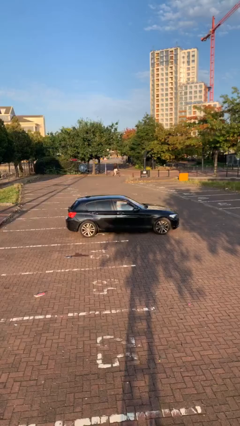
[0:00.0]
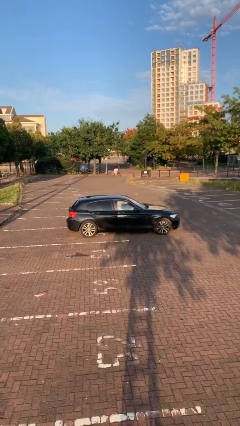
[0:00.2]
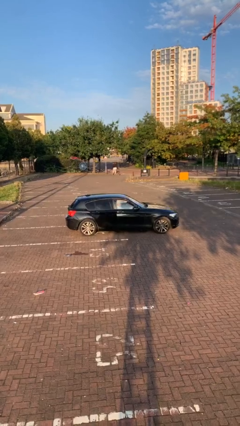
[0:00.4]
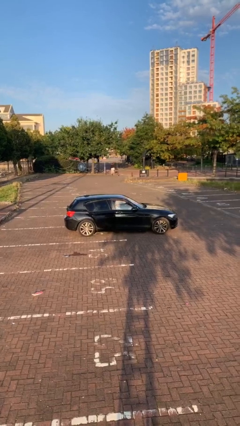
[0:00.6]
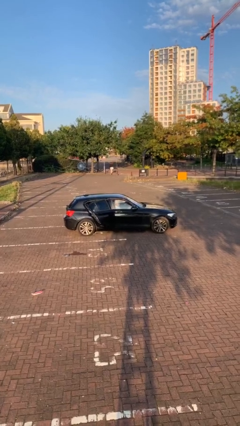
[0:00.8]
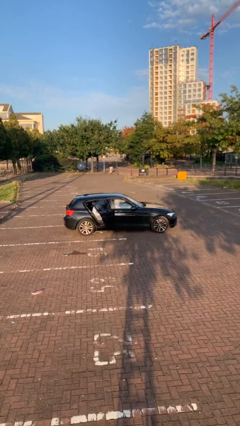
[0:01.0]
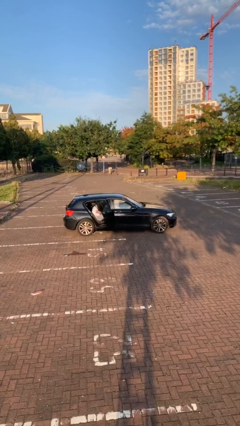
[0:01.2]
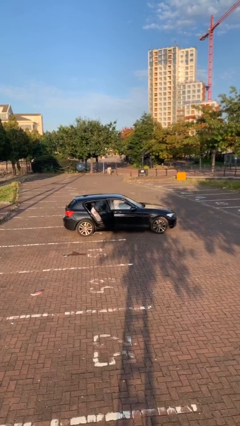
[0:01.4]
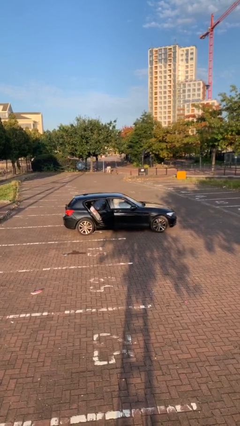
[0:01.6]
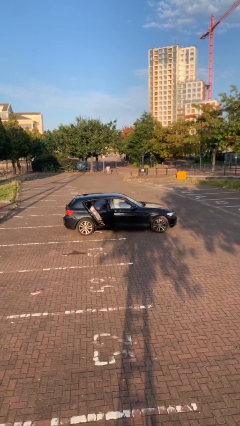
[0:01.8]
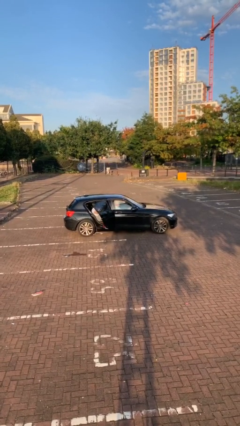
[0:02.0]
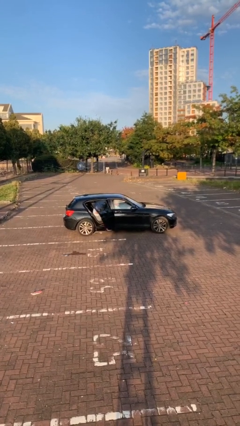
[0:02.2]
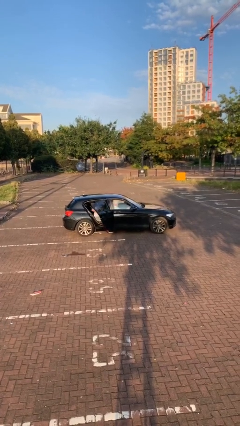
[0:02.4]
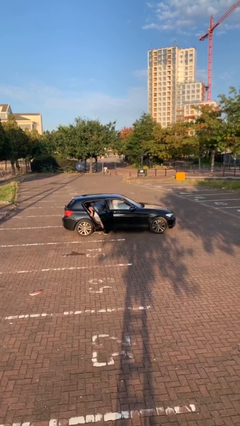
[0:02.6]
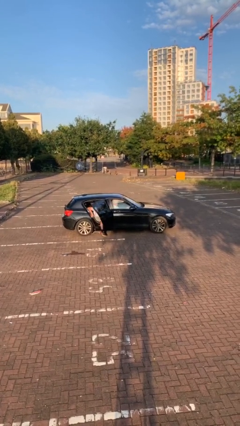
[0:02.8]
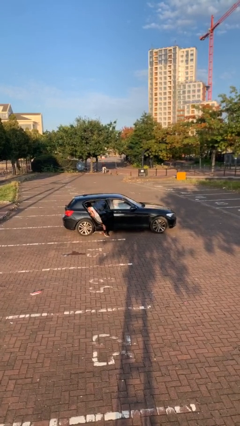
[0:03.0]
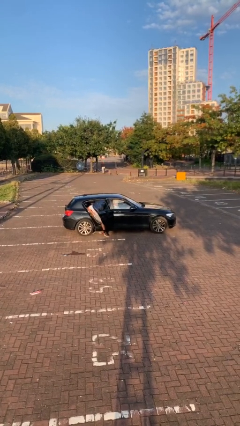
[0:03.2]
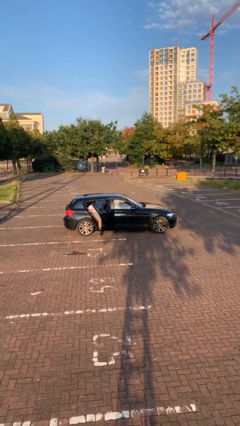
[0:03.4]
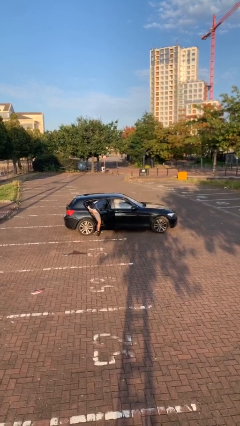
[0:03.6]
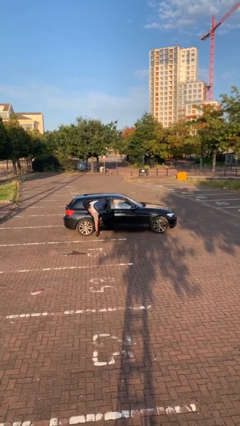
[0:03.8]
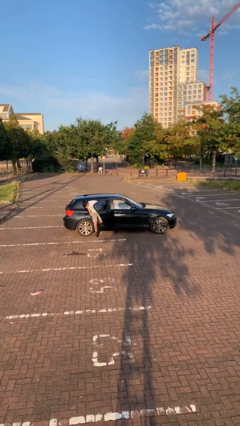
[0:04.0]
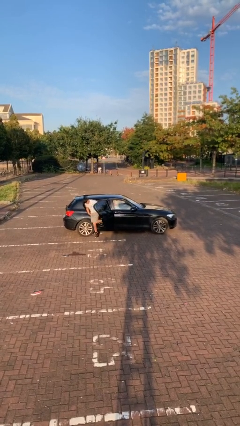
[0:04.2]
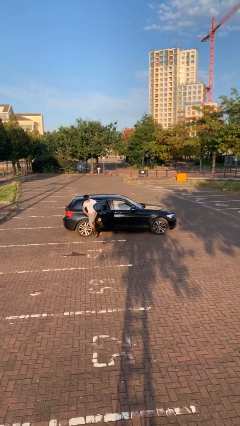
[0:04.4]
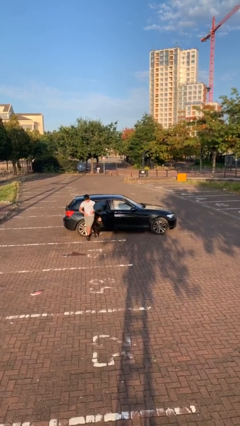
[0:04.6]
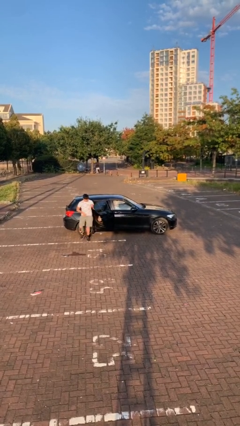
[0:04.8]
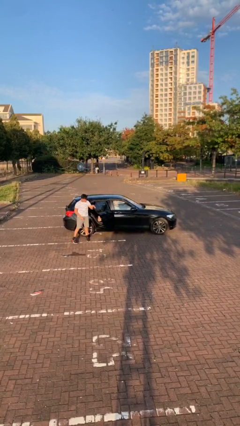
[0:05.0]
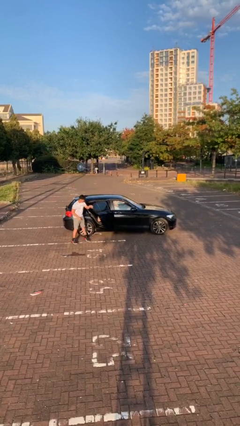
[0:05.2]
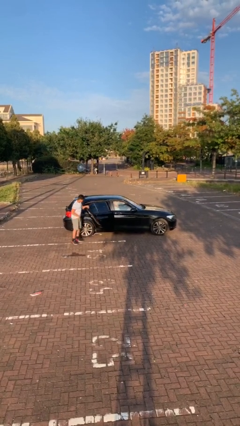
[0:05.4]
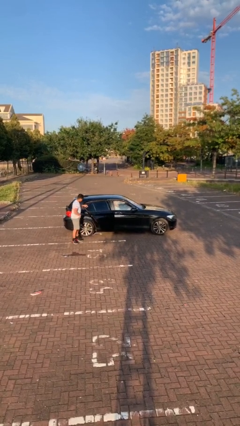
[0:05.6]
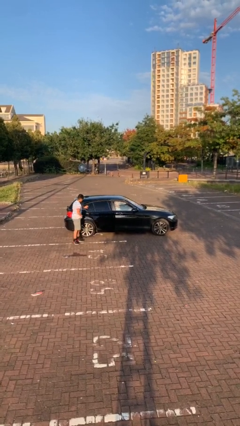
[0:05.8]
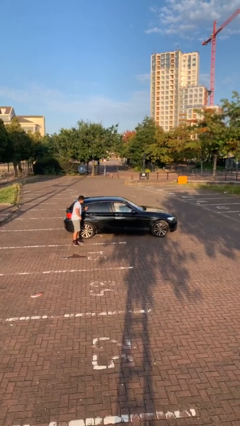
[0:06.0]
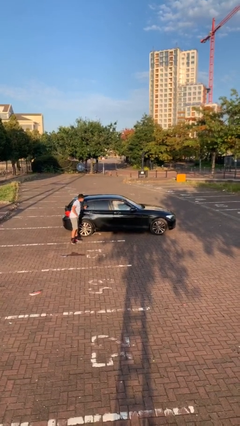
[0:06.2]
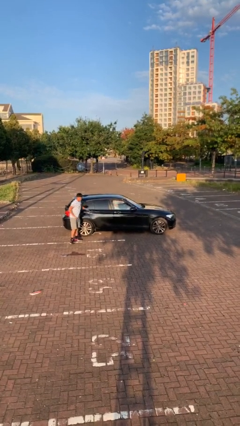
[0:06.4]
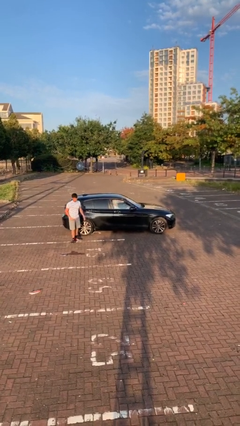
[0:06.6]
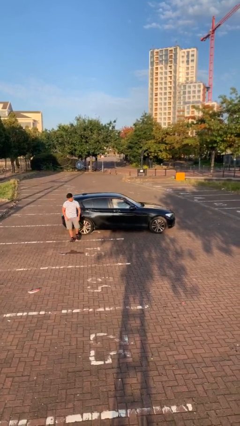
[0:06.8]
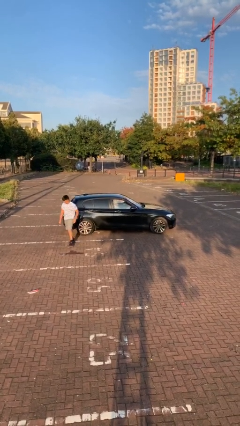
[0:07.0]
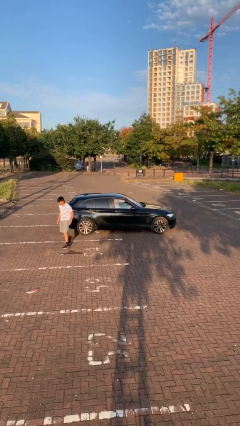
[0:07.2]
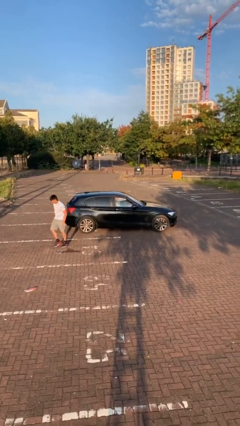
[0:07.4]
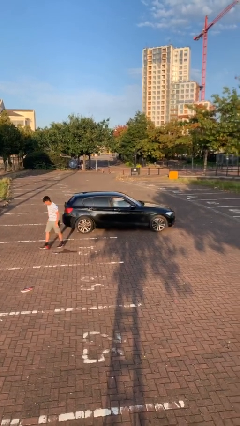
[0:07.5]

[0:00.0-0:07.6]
car drops off person

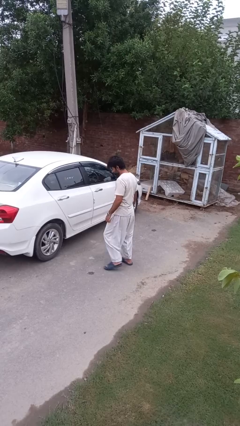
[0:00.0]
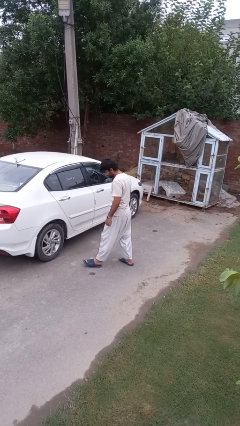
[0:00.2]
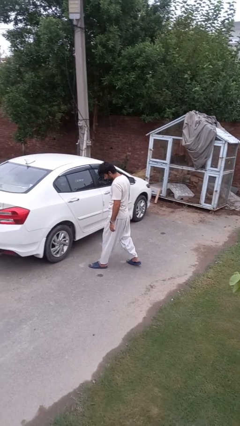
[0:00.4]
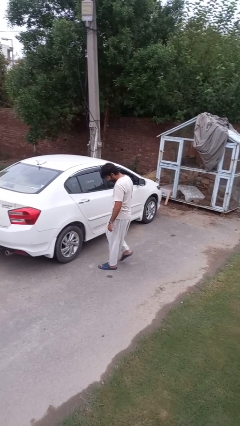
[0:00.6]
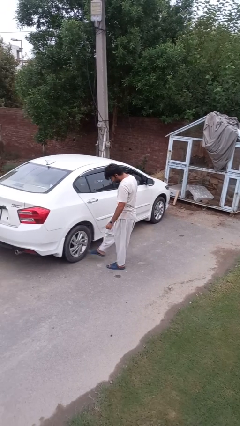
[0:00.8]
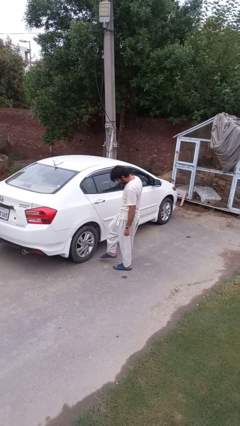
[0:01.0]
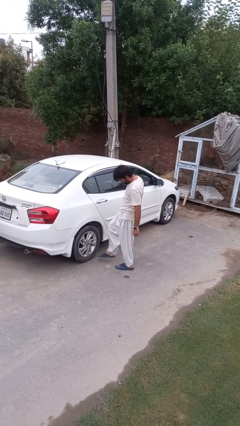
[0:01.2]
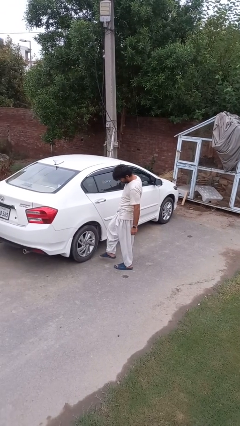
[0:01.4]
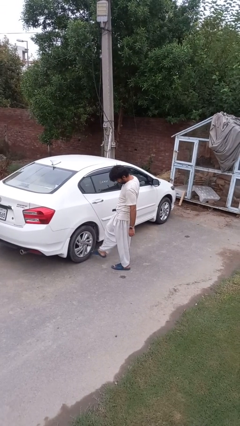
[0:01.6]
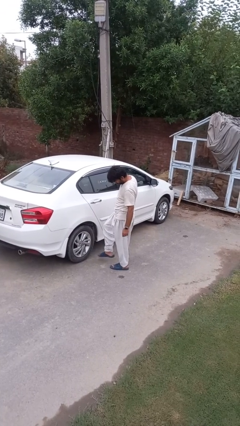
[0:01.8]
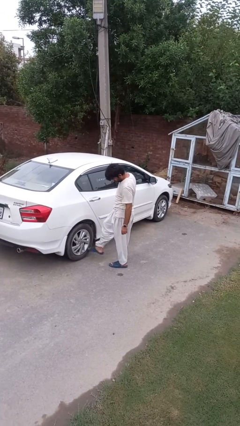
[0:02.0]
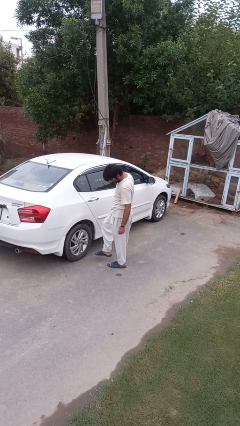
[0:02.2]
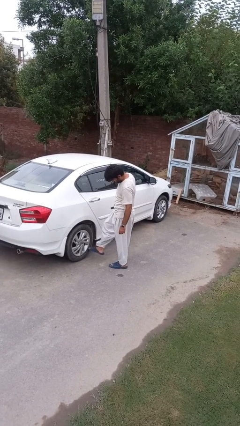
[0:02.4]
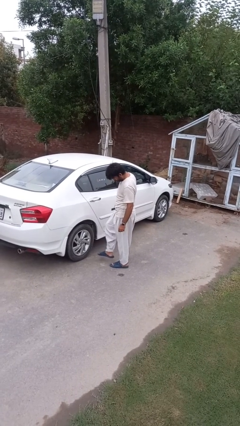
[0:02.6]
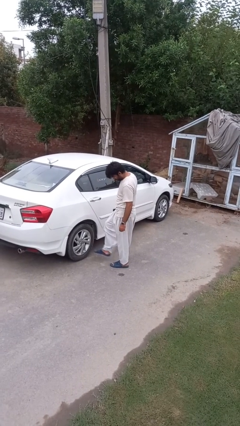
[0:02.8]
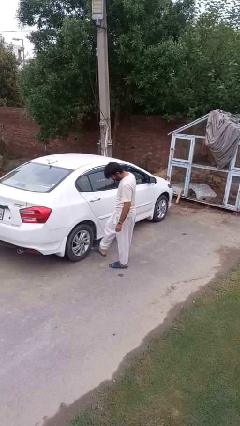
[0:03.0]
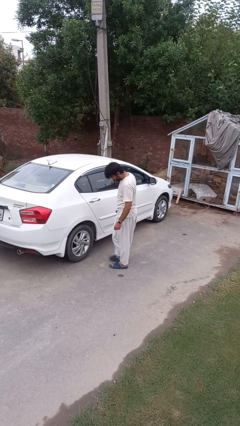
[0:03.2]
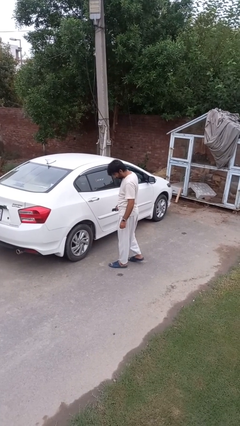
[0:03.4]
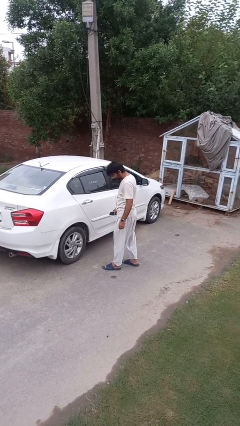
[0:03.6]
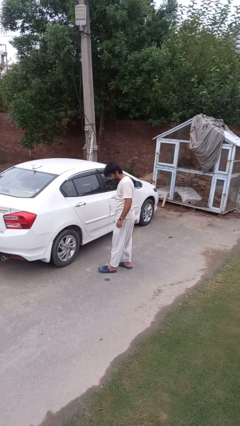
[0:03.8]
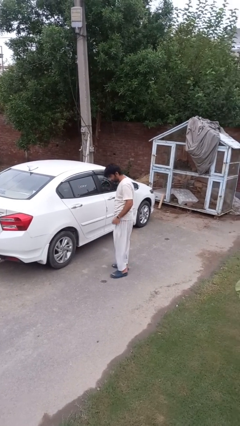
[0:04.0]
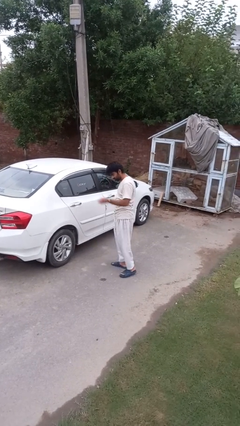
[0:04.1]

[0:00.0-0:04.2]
person kicks car tires

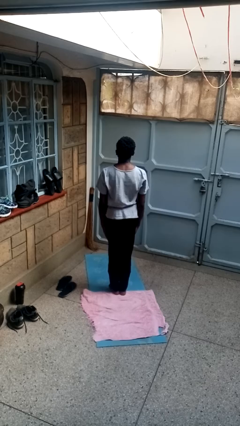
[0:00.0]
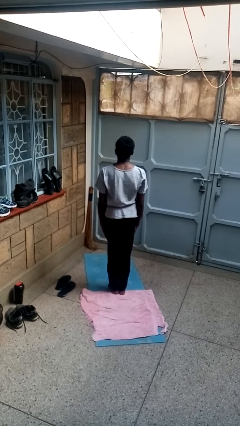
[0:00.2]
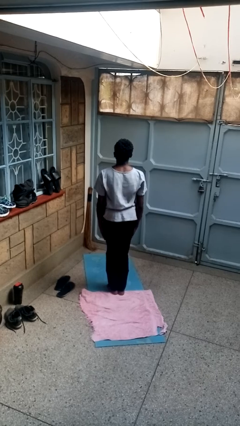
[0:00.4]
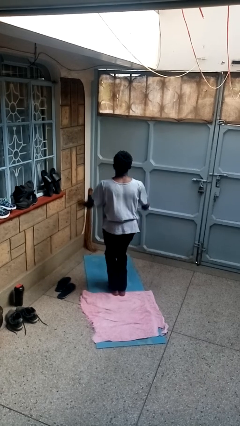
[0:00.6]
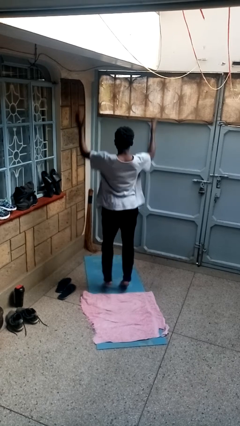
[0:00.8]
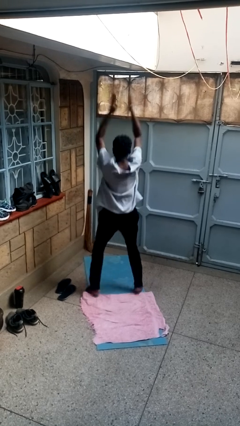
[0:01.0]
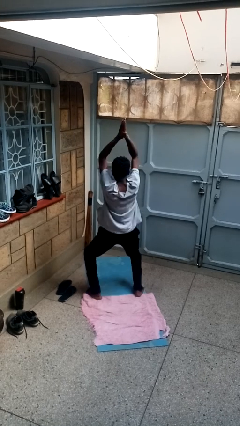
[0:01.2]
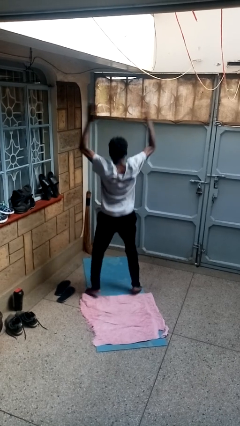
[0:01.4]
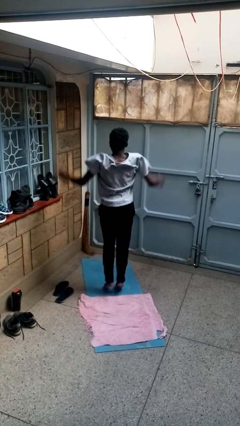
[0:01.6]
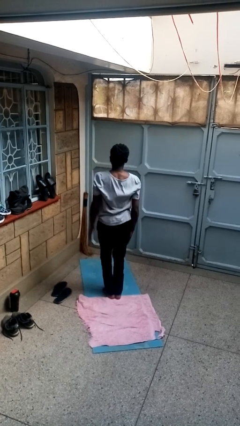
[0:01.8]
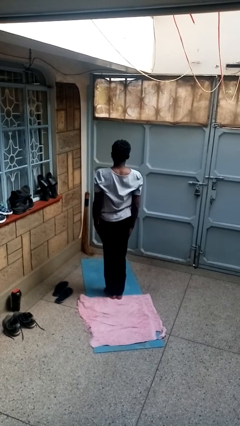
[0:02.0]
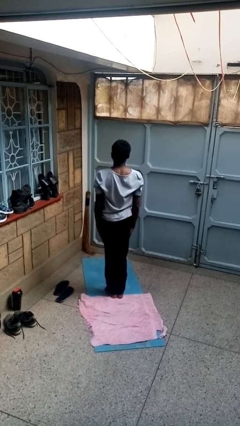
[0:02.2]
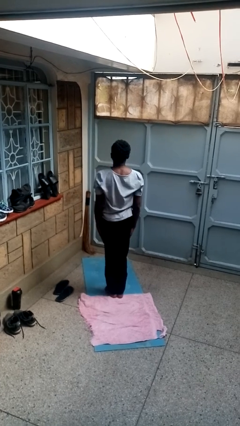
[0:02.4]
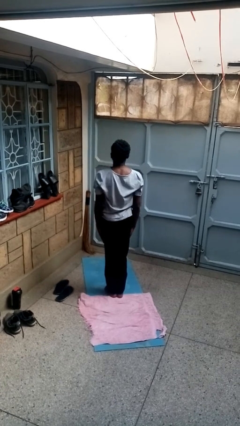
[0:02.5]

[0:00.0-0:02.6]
person exercises with jumping jacks

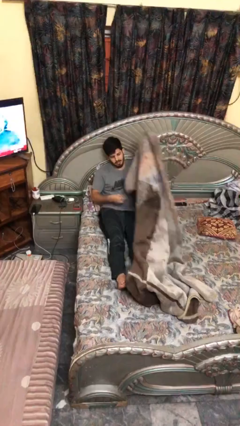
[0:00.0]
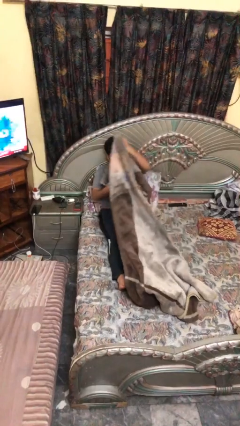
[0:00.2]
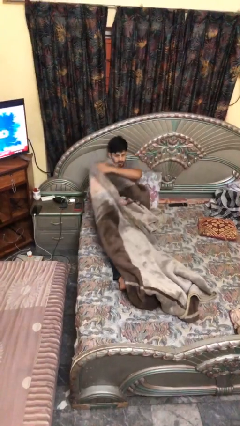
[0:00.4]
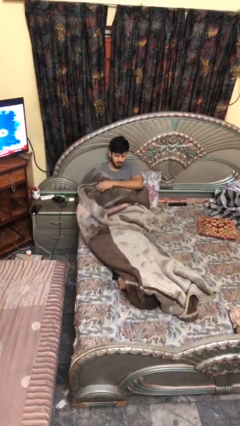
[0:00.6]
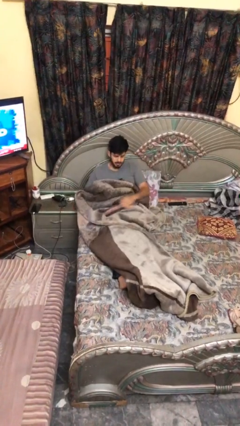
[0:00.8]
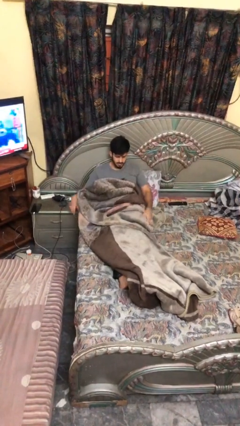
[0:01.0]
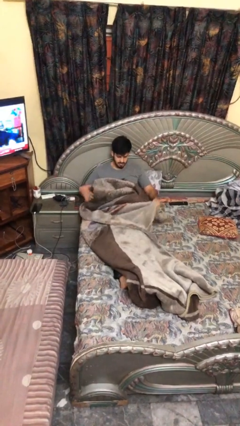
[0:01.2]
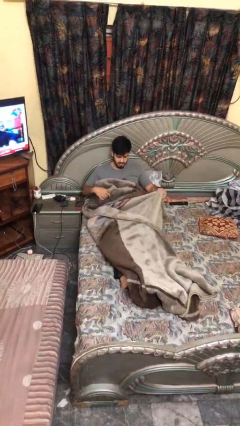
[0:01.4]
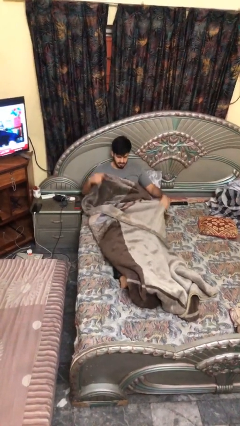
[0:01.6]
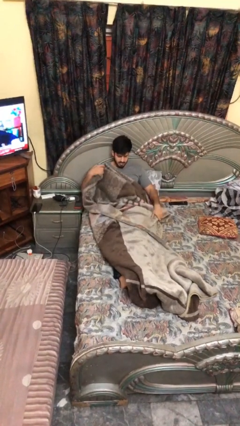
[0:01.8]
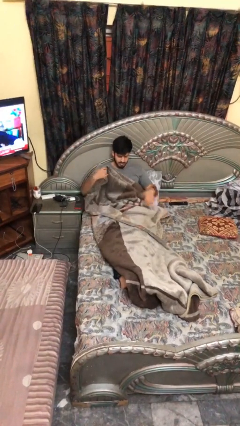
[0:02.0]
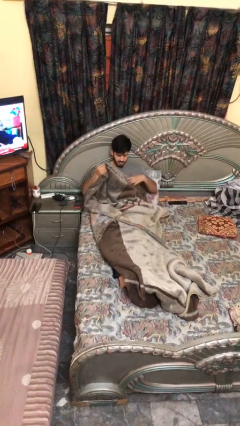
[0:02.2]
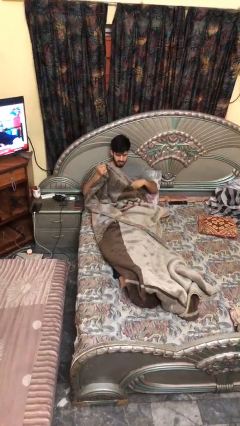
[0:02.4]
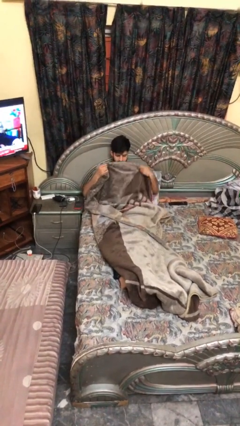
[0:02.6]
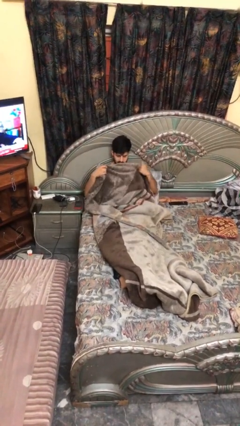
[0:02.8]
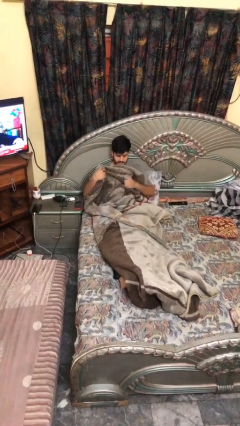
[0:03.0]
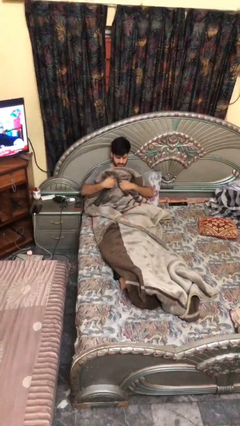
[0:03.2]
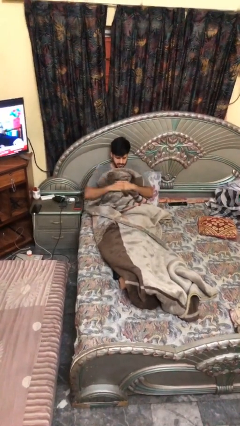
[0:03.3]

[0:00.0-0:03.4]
person covers with blanket

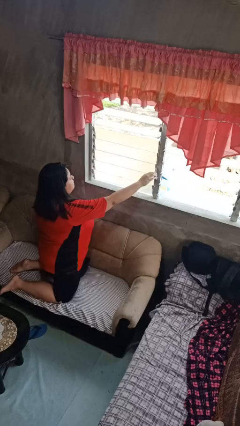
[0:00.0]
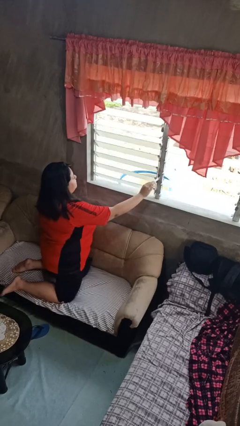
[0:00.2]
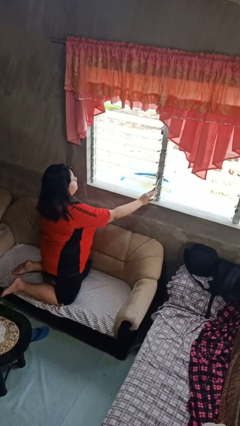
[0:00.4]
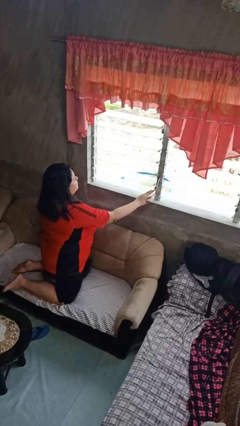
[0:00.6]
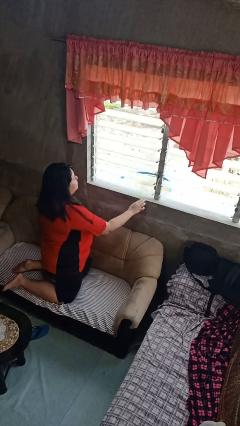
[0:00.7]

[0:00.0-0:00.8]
person opens home window
